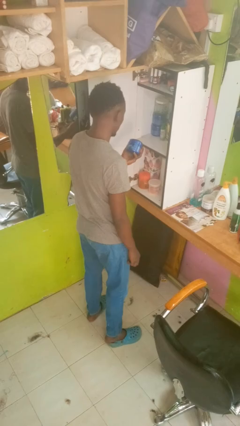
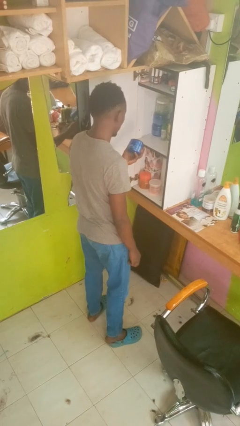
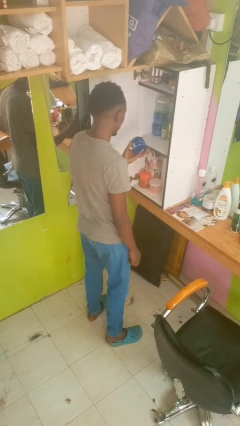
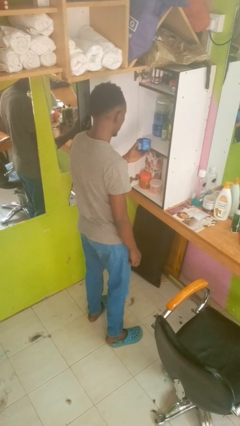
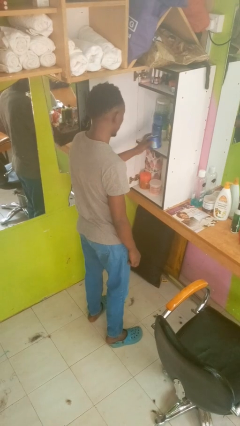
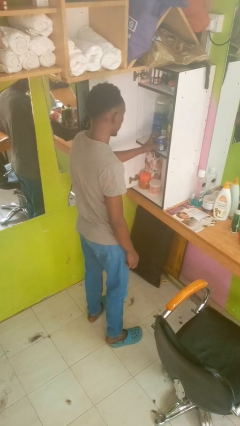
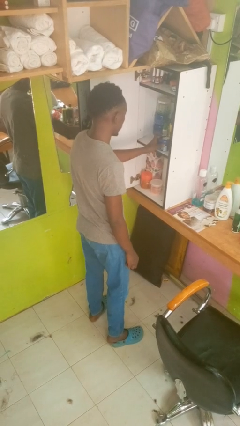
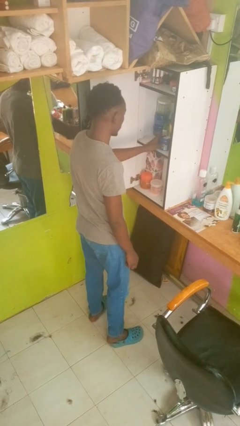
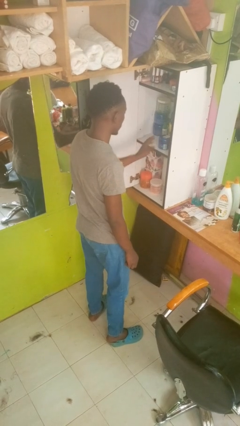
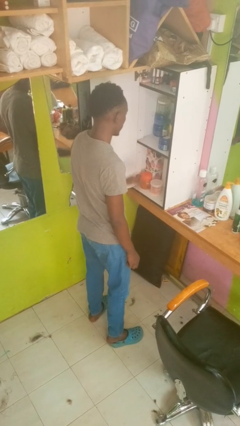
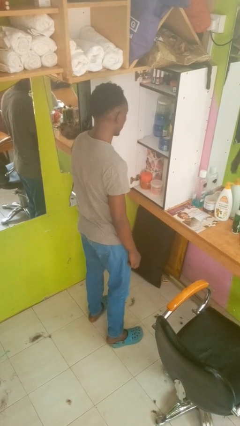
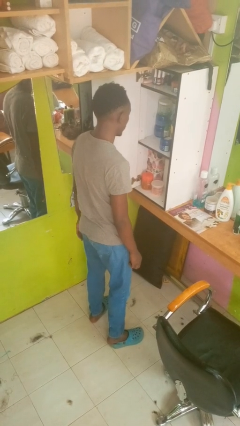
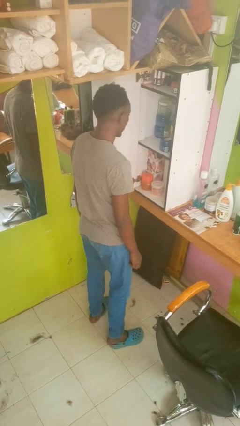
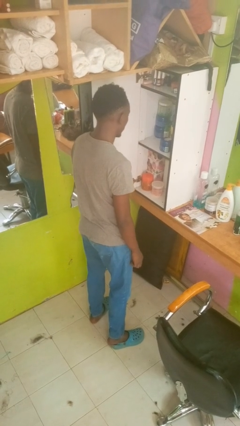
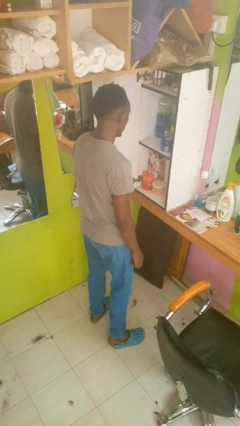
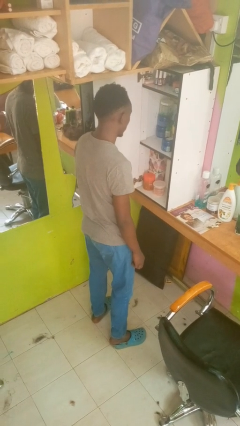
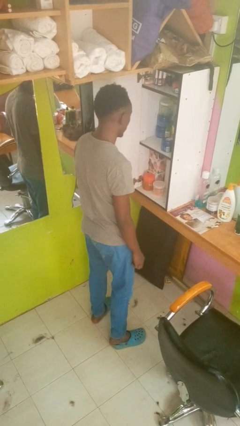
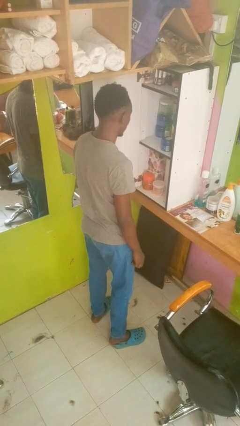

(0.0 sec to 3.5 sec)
person puts down object into cabinet

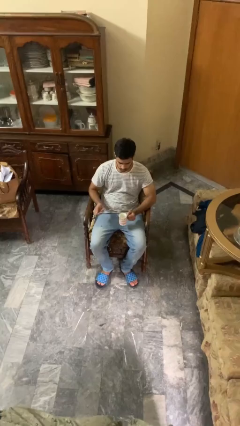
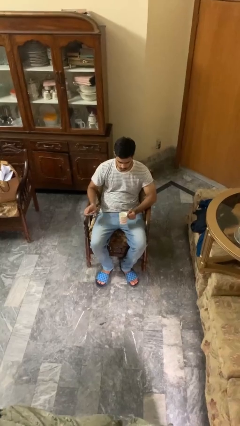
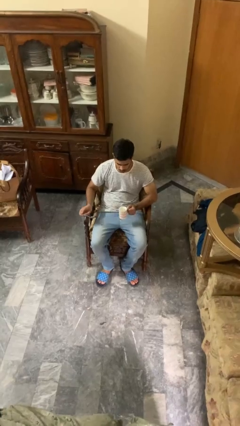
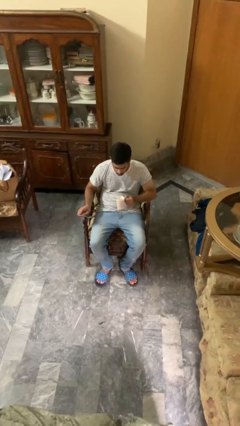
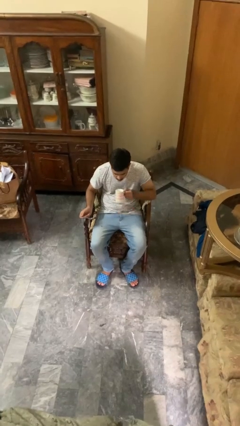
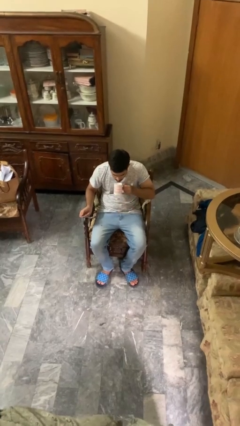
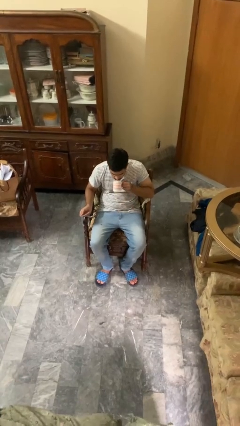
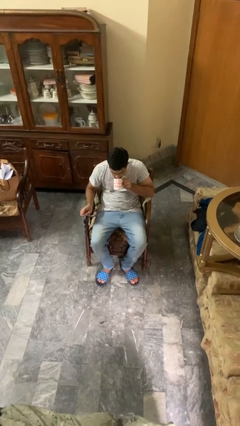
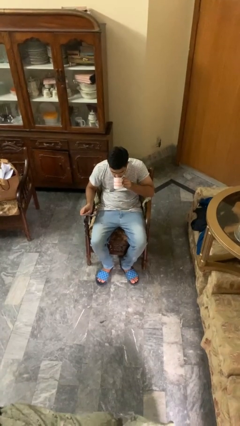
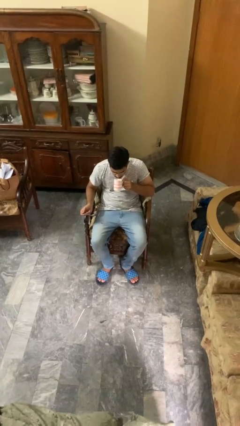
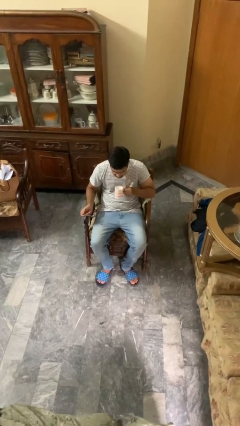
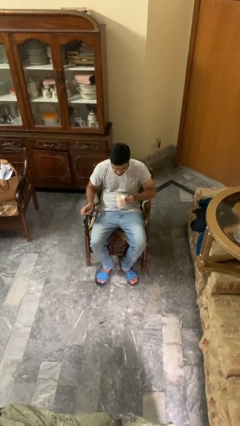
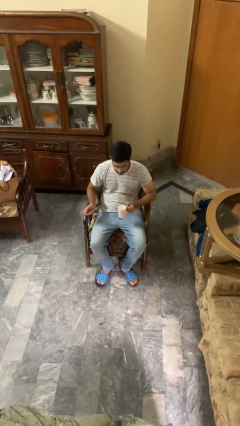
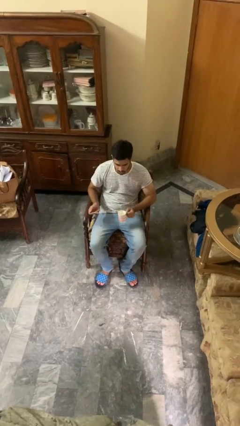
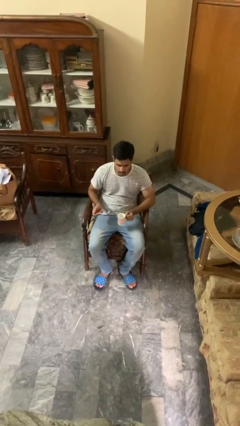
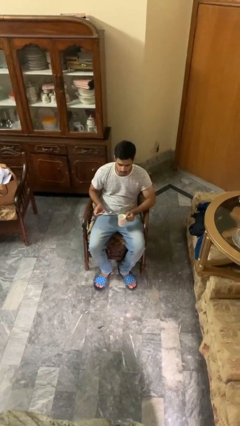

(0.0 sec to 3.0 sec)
person drinks from mug

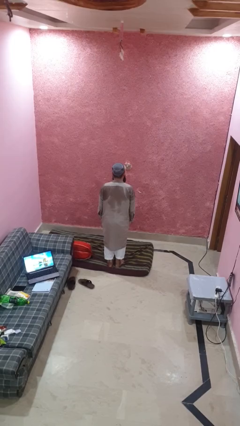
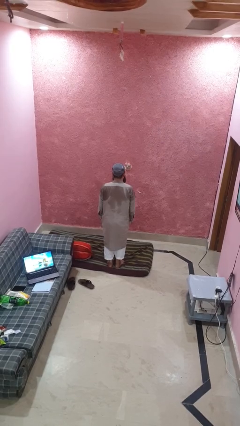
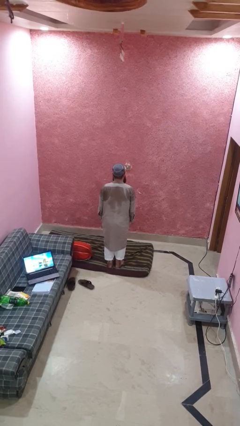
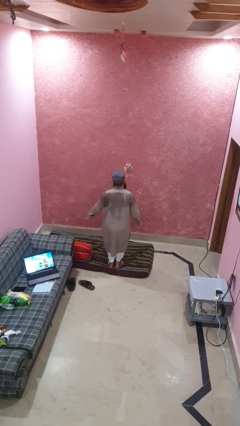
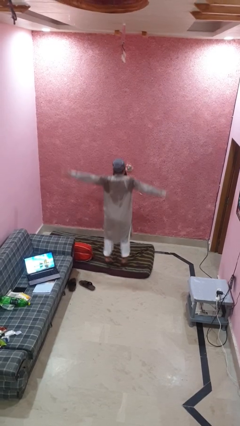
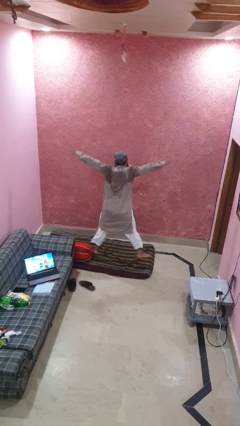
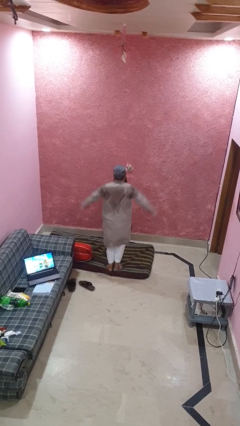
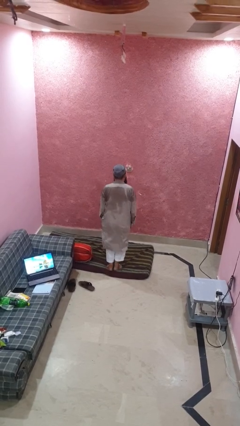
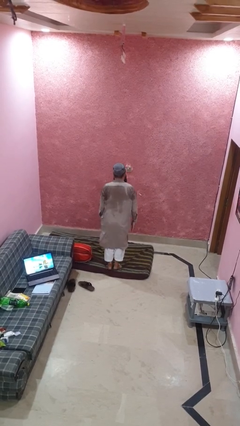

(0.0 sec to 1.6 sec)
person exercises with jumping jacks

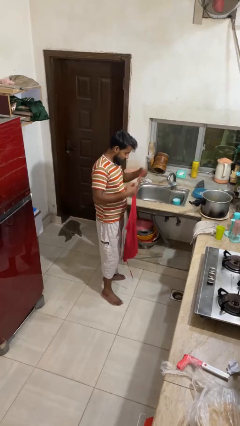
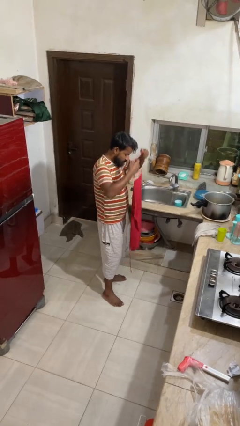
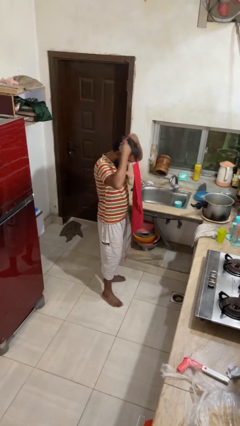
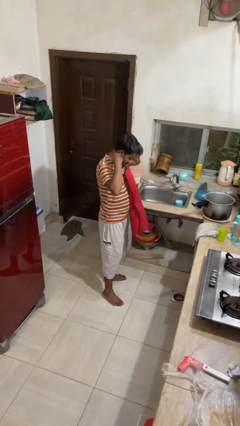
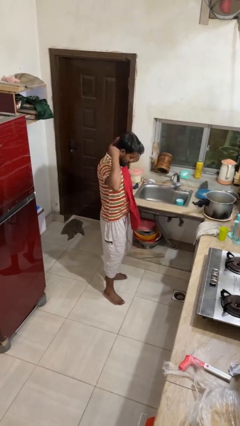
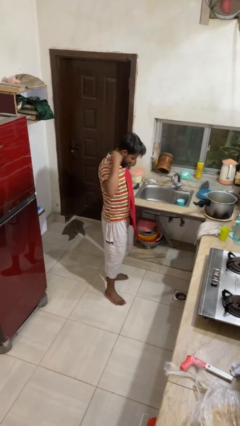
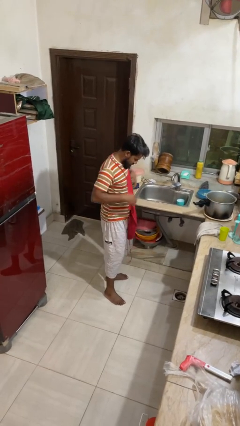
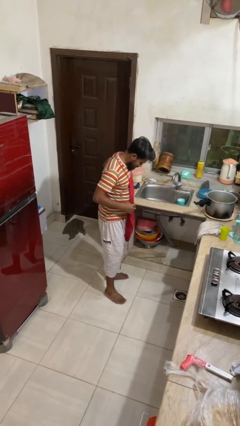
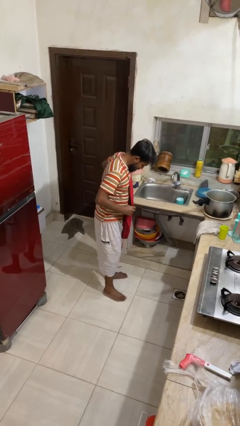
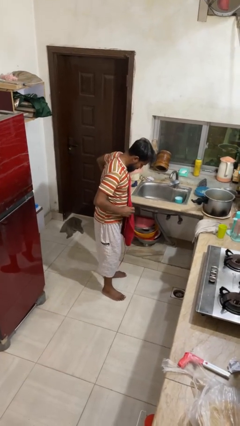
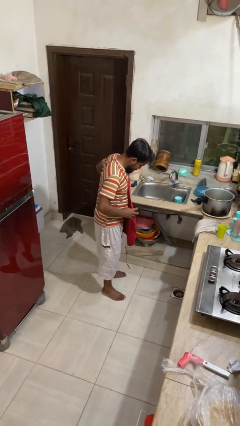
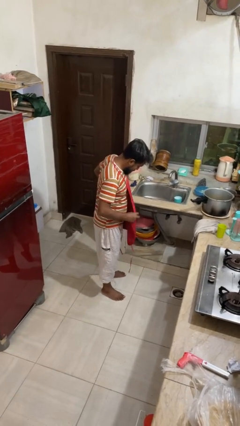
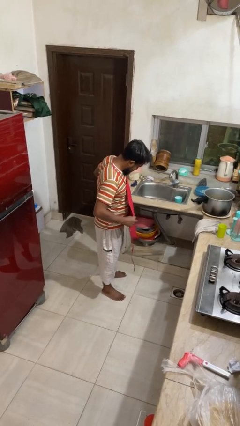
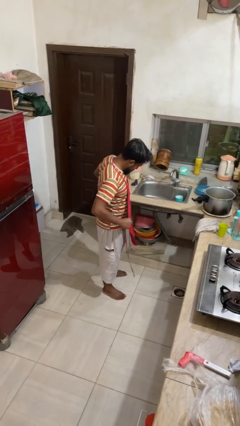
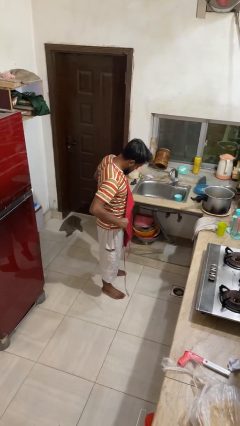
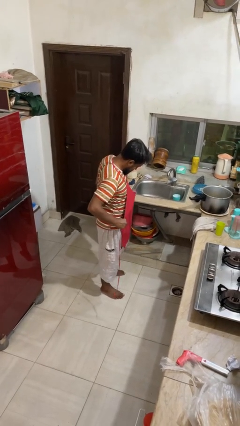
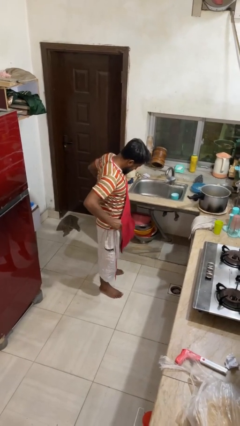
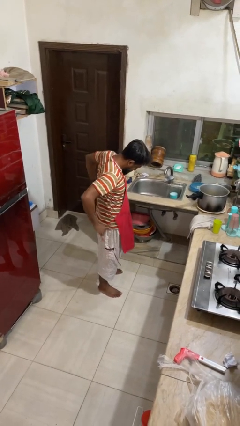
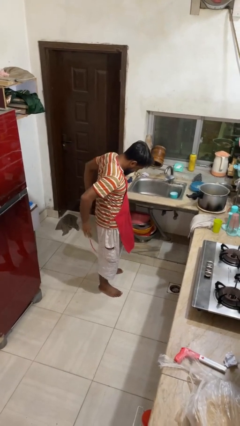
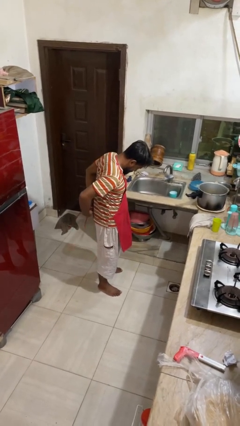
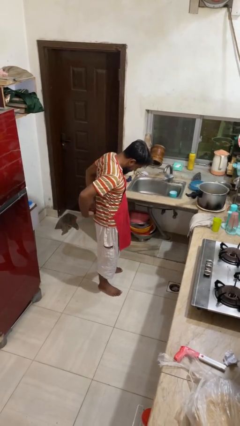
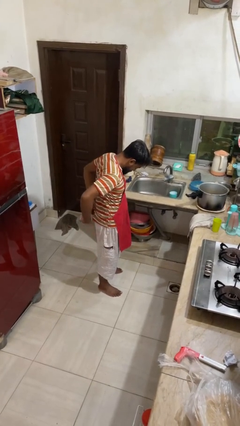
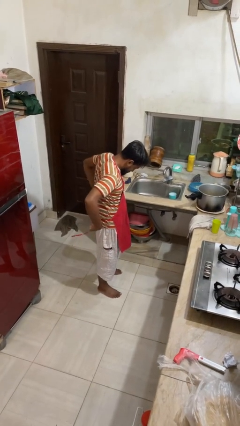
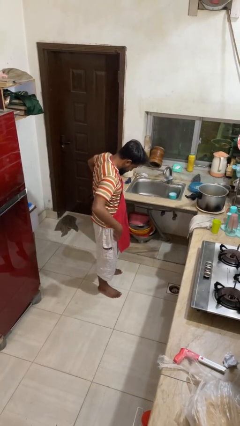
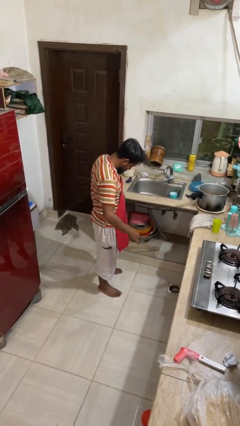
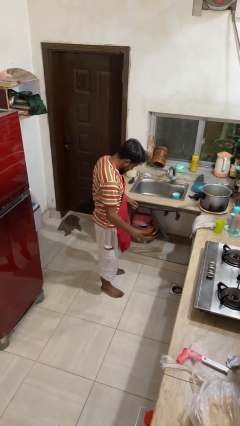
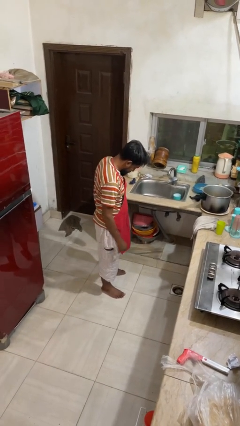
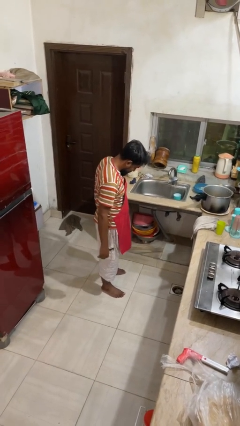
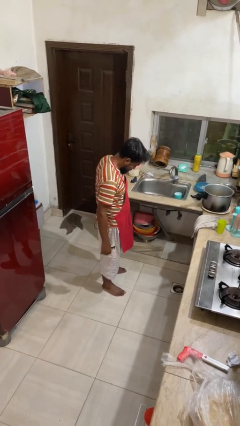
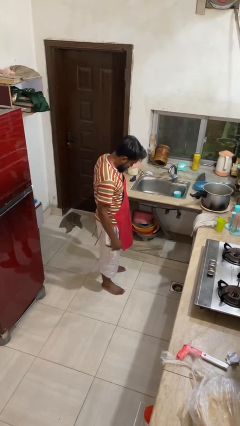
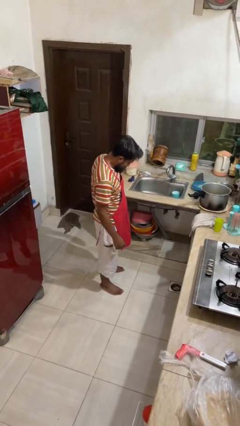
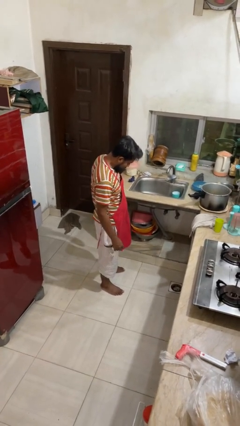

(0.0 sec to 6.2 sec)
person puts on apron

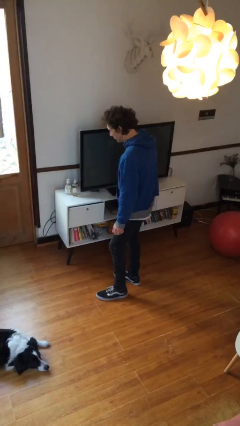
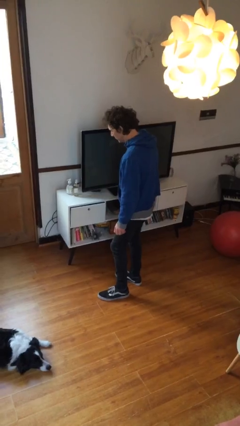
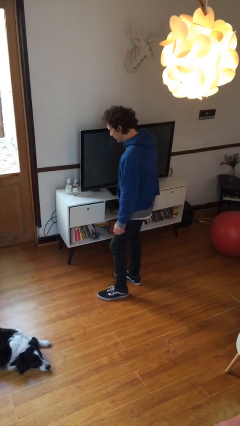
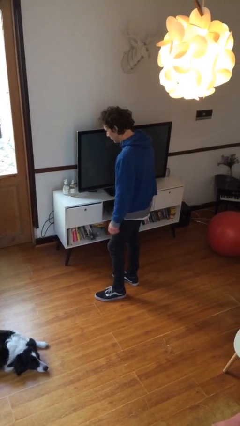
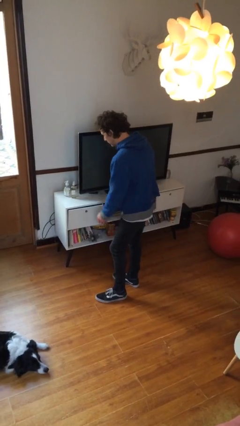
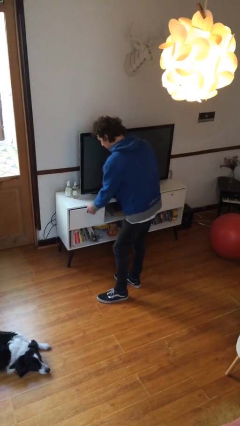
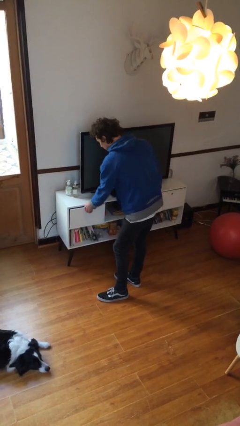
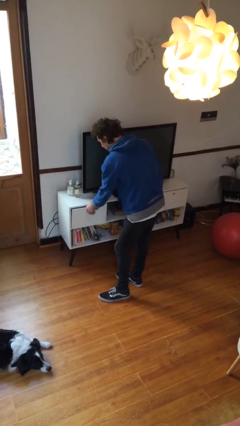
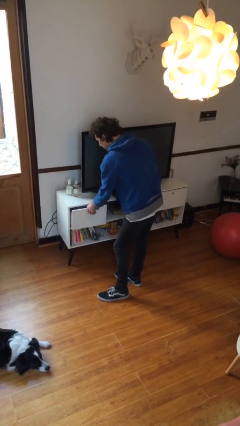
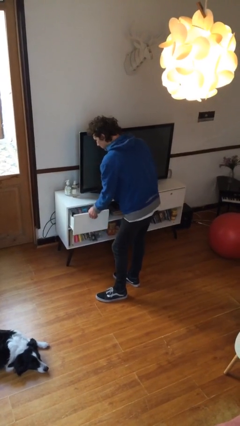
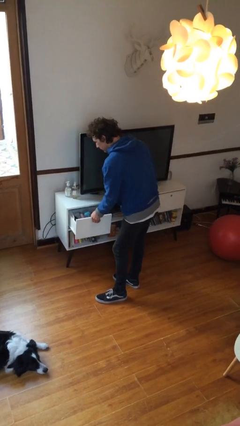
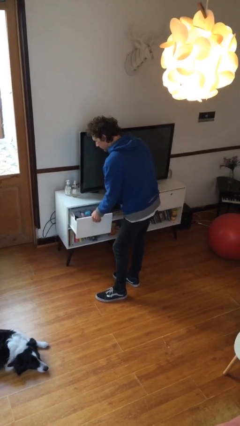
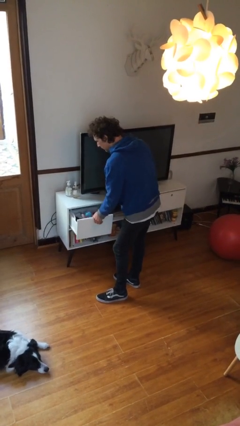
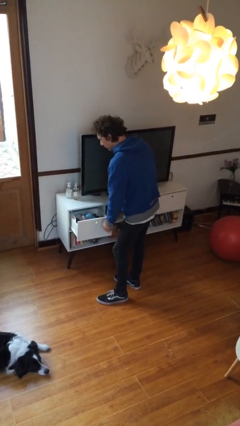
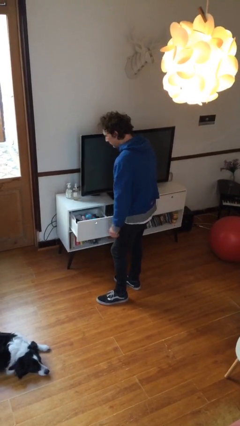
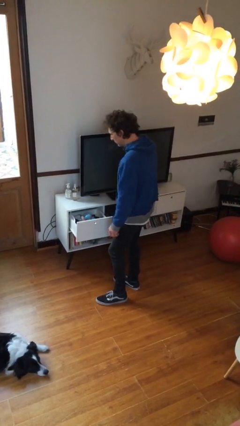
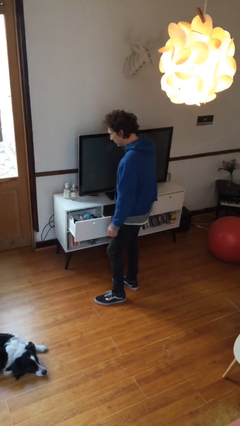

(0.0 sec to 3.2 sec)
person opens dresser drawer
